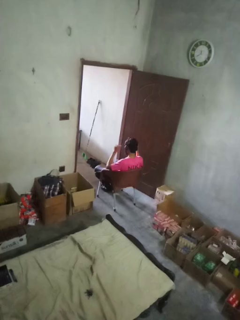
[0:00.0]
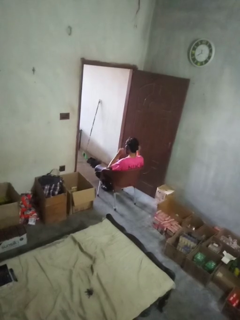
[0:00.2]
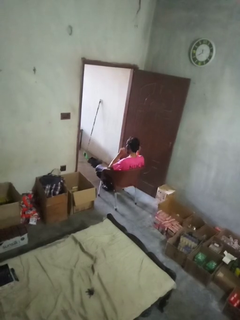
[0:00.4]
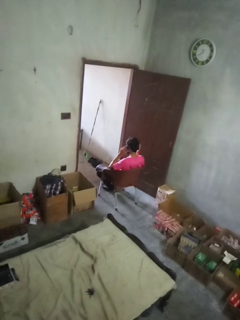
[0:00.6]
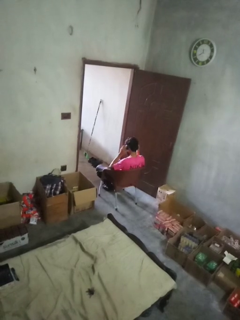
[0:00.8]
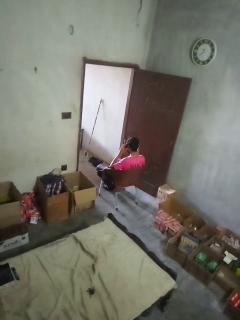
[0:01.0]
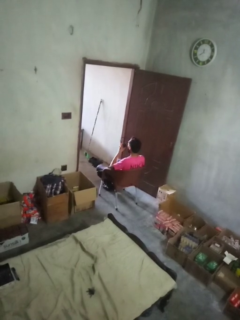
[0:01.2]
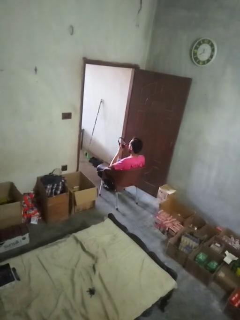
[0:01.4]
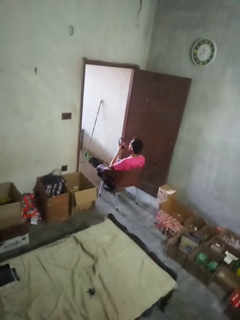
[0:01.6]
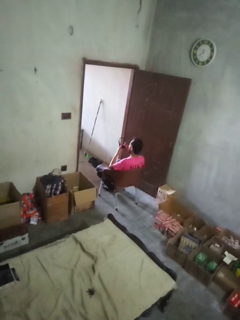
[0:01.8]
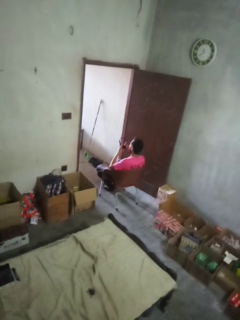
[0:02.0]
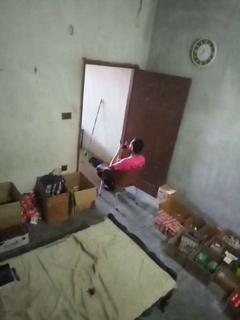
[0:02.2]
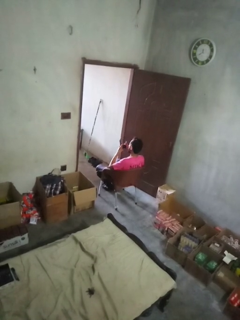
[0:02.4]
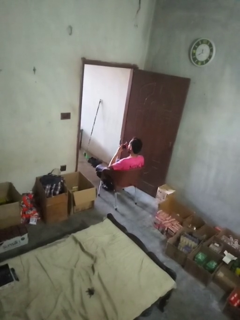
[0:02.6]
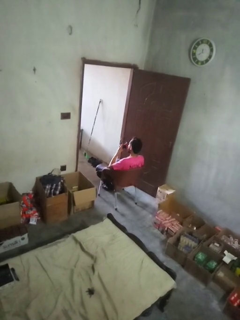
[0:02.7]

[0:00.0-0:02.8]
person takes off headphones

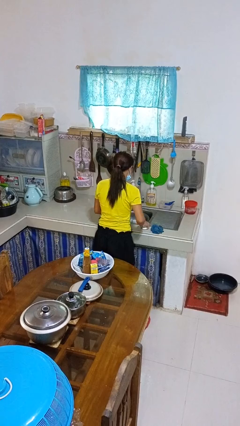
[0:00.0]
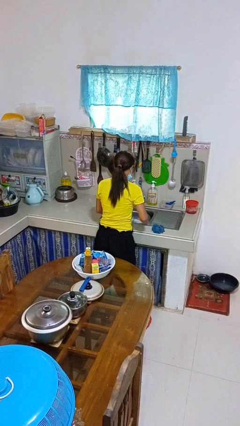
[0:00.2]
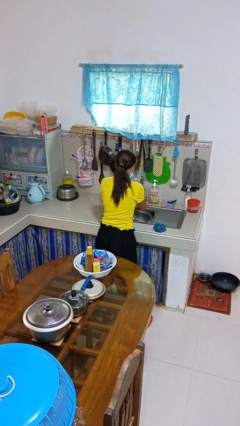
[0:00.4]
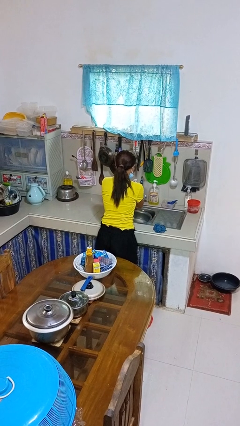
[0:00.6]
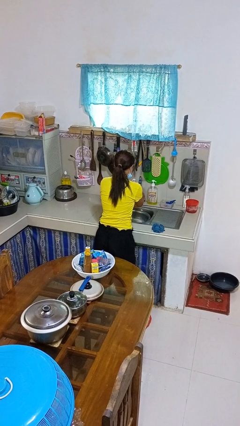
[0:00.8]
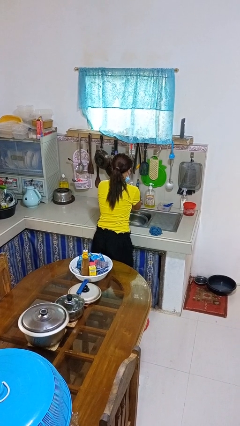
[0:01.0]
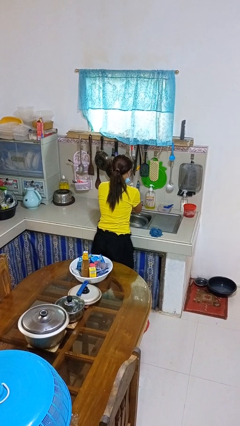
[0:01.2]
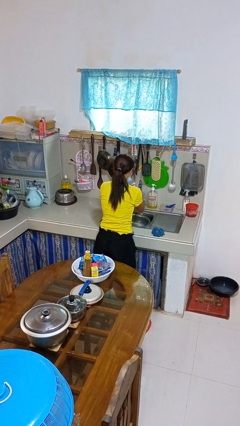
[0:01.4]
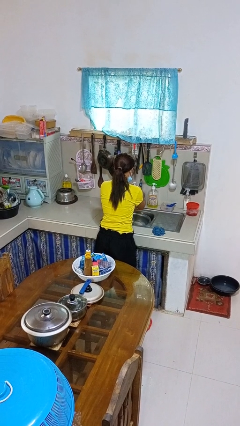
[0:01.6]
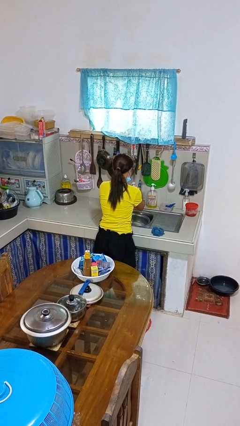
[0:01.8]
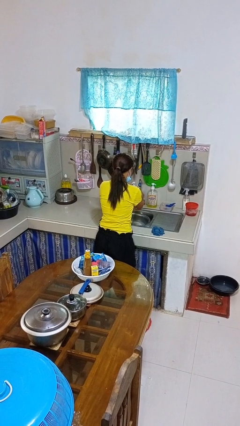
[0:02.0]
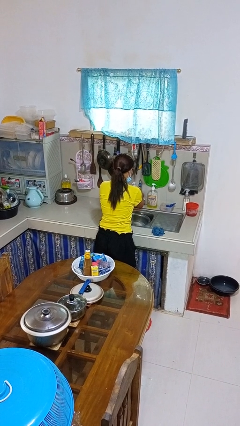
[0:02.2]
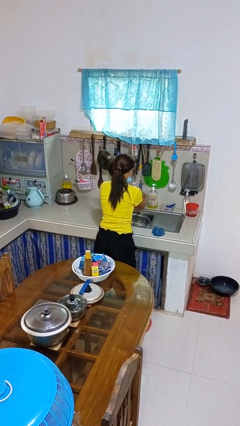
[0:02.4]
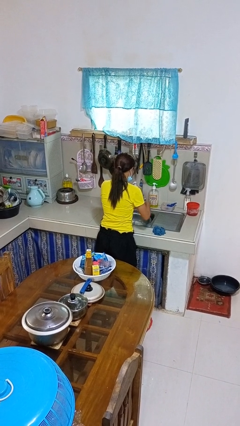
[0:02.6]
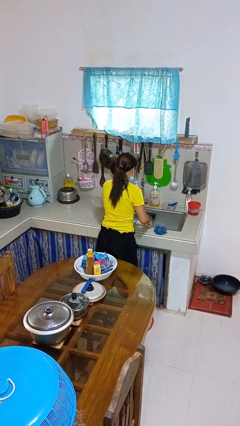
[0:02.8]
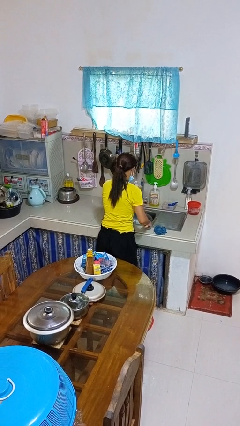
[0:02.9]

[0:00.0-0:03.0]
person washes hands

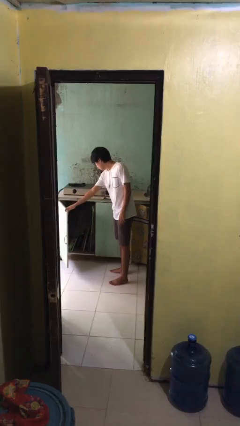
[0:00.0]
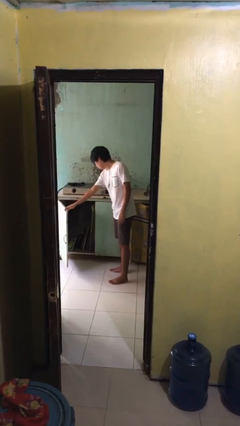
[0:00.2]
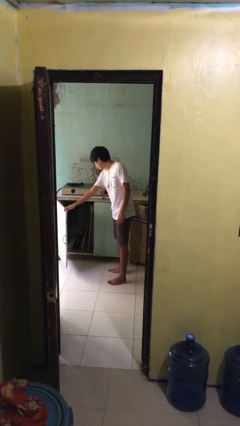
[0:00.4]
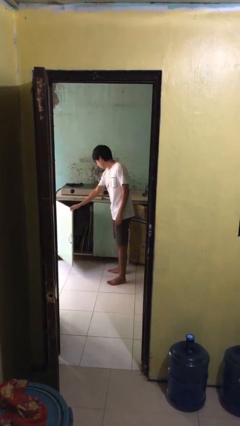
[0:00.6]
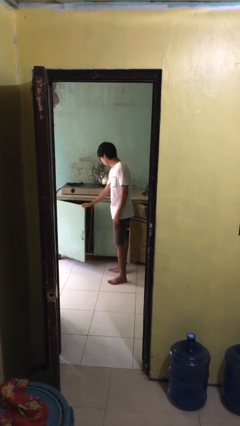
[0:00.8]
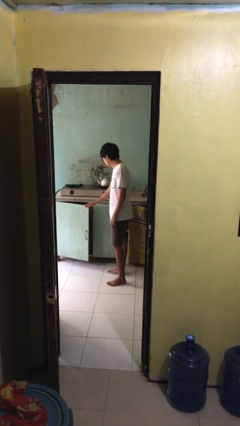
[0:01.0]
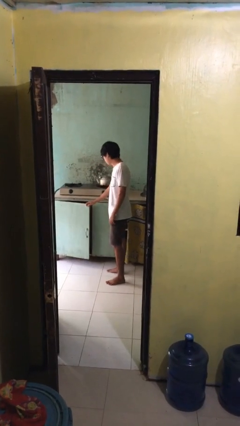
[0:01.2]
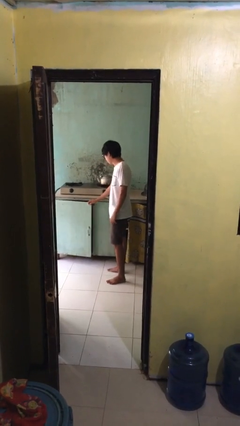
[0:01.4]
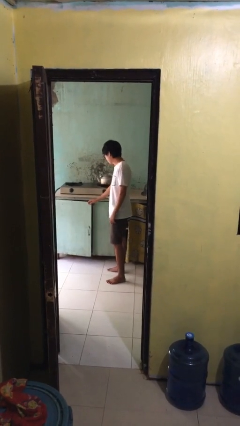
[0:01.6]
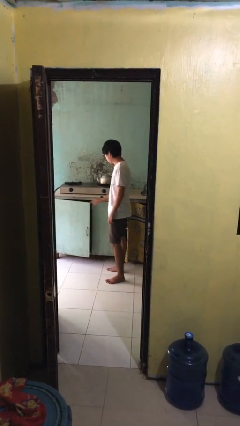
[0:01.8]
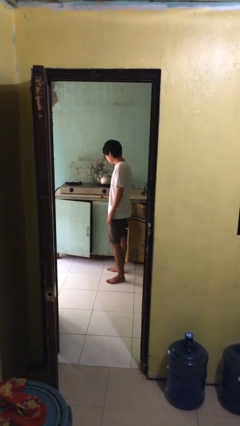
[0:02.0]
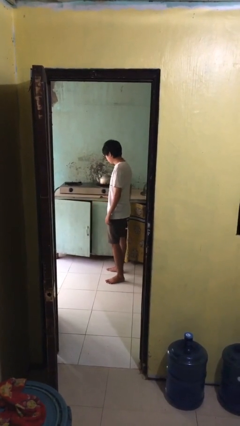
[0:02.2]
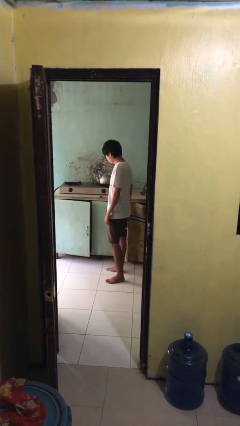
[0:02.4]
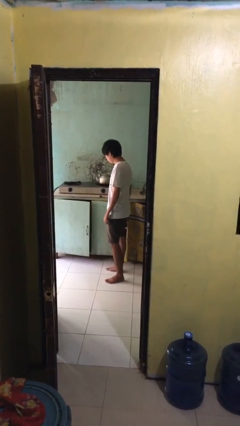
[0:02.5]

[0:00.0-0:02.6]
person closes cabinet

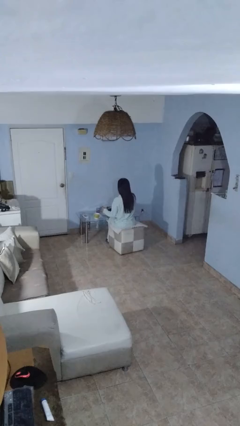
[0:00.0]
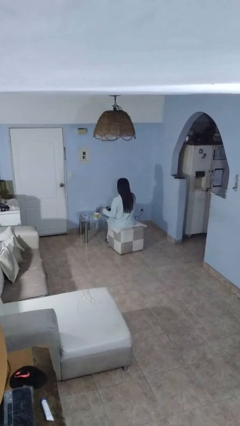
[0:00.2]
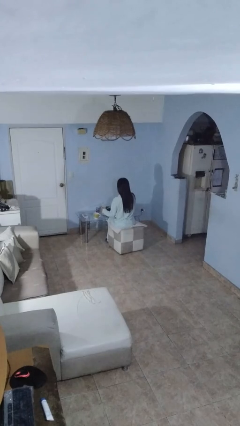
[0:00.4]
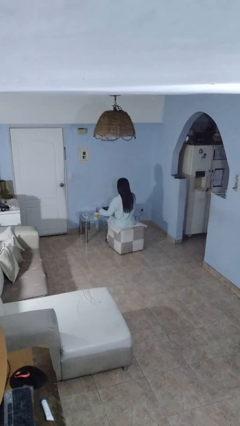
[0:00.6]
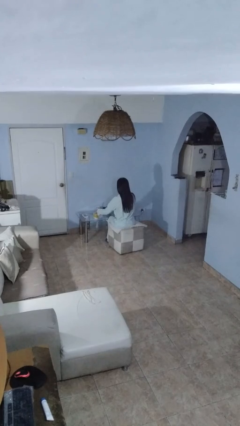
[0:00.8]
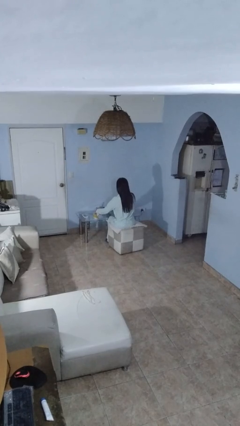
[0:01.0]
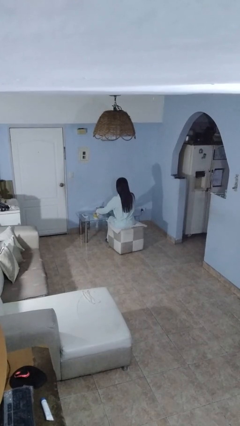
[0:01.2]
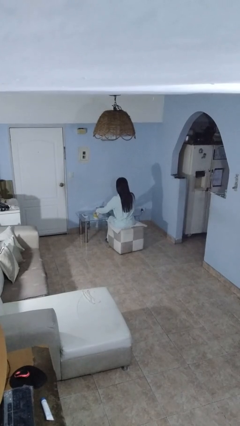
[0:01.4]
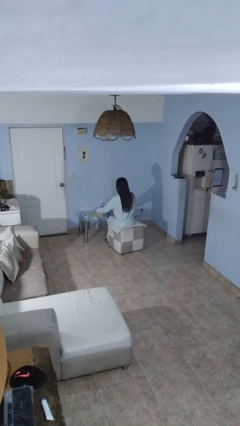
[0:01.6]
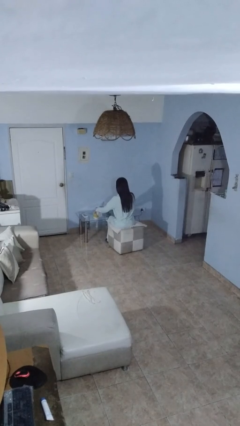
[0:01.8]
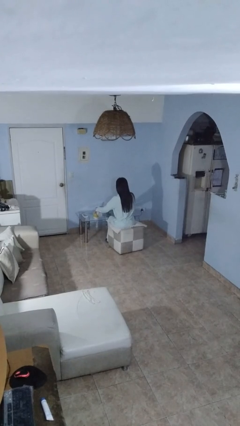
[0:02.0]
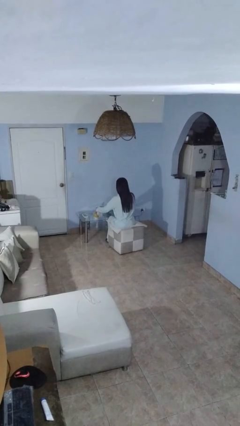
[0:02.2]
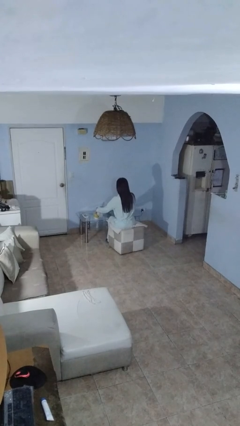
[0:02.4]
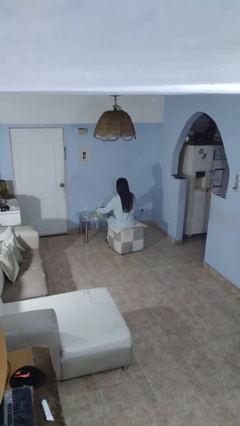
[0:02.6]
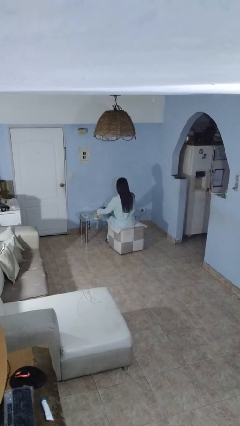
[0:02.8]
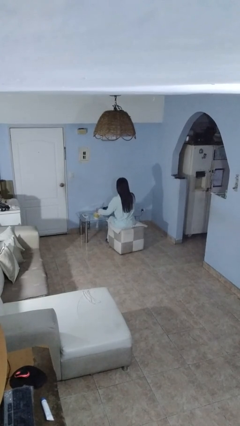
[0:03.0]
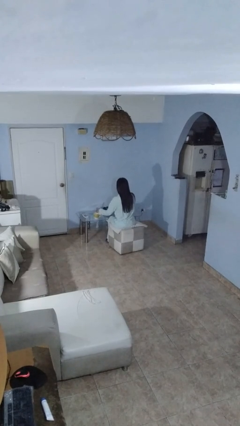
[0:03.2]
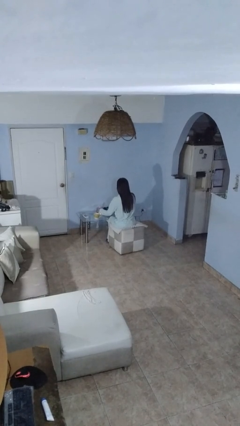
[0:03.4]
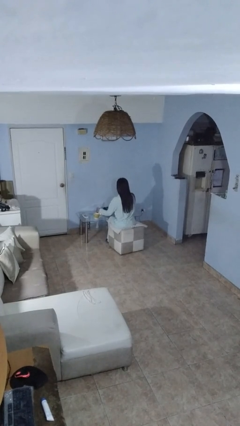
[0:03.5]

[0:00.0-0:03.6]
person pours liquid into cup

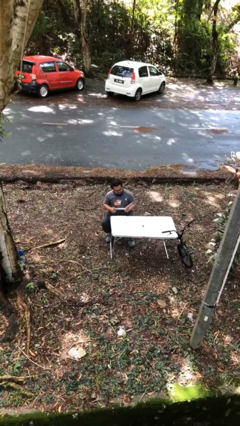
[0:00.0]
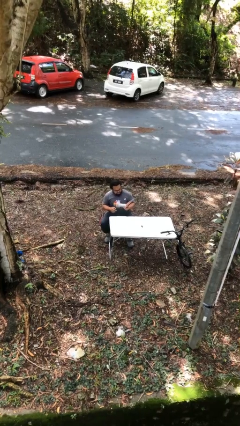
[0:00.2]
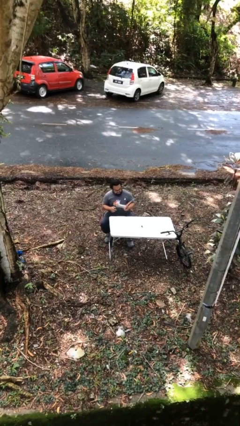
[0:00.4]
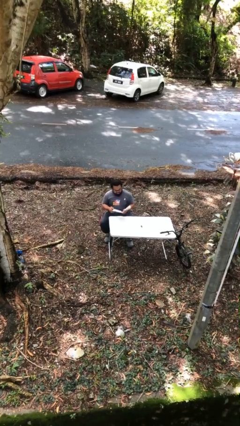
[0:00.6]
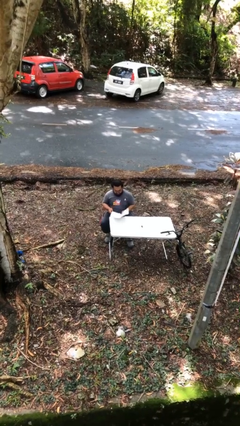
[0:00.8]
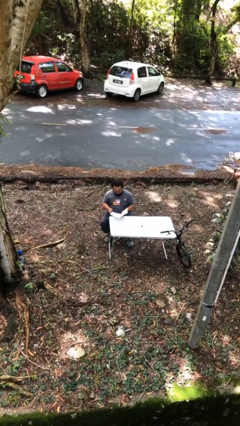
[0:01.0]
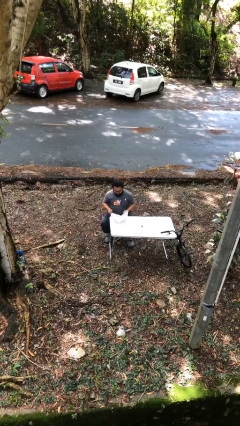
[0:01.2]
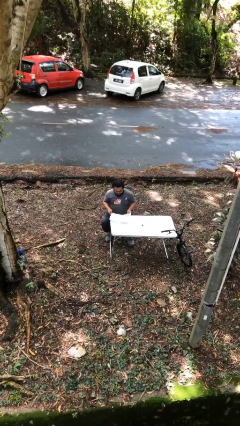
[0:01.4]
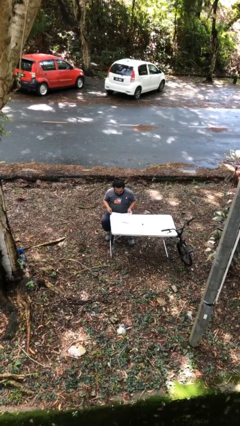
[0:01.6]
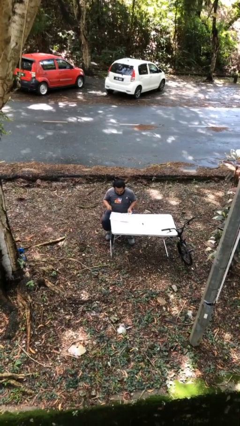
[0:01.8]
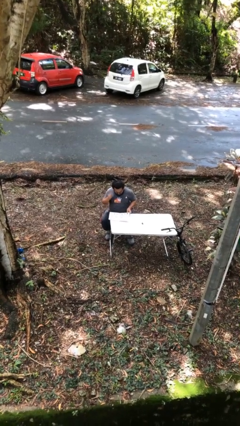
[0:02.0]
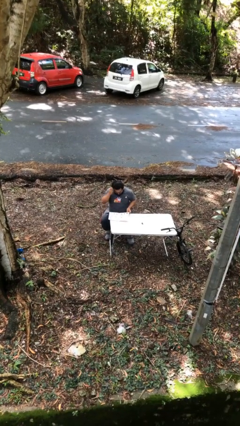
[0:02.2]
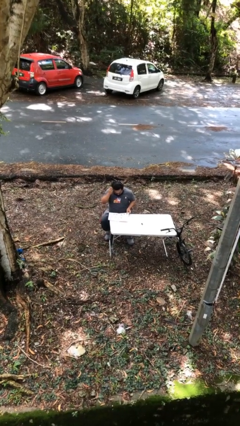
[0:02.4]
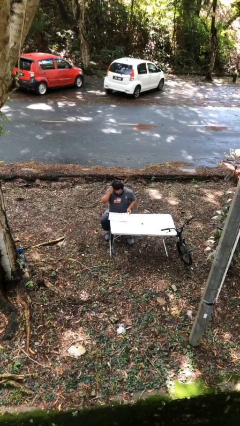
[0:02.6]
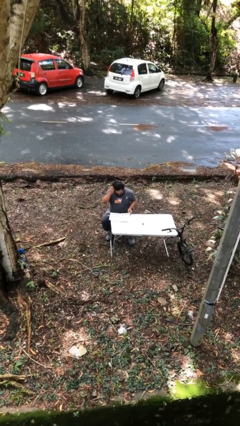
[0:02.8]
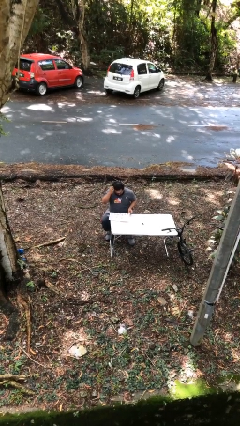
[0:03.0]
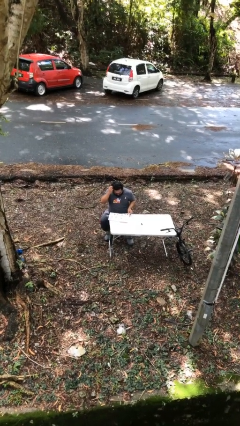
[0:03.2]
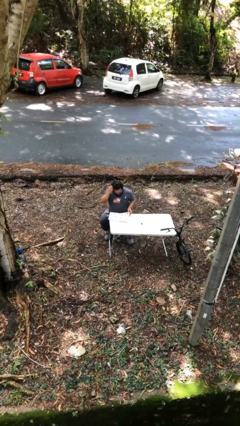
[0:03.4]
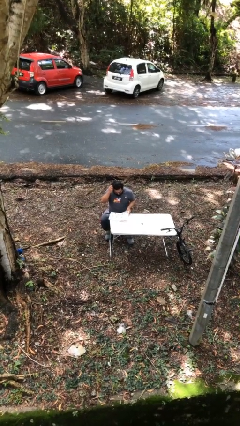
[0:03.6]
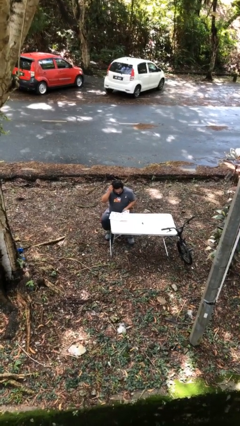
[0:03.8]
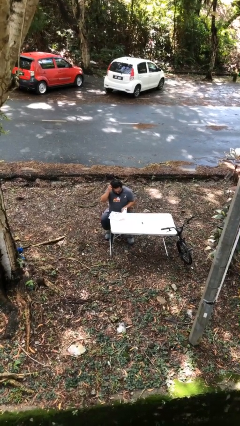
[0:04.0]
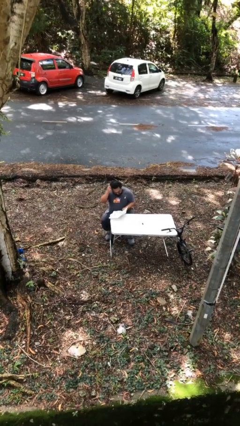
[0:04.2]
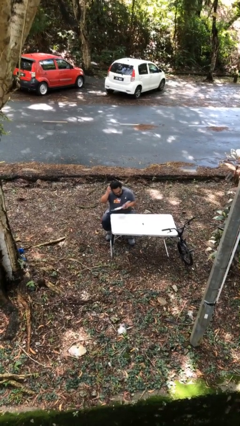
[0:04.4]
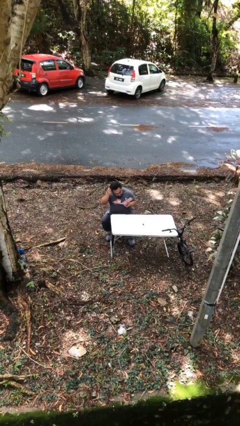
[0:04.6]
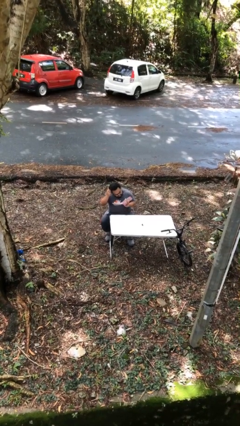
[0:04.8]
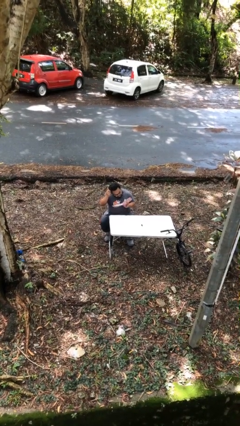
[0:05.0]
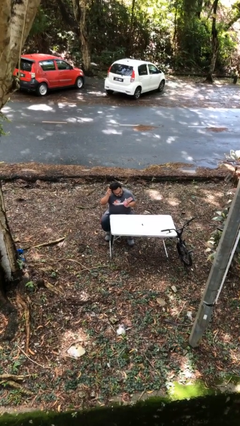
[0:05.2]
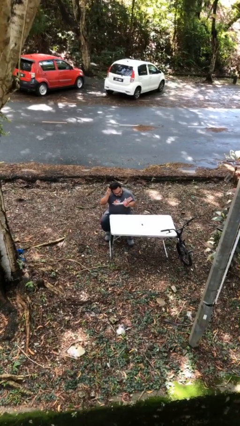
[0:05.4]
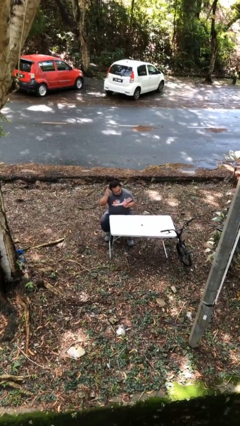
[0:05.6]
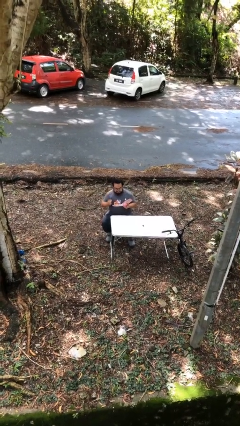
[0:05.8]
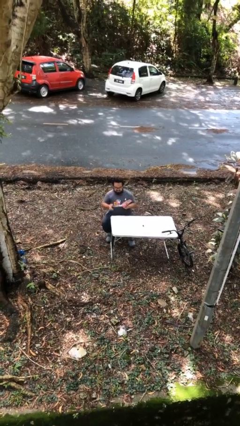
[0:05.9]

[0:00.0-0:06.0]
person reads document
